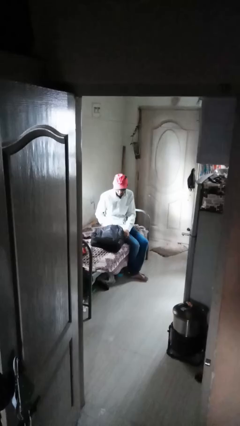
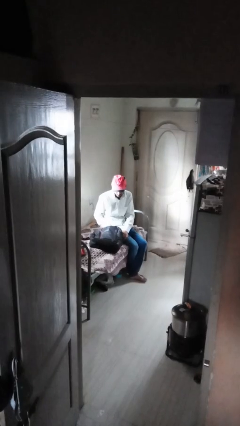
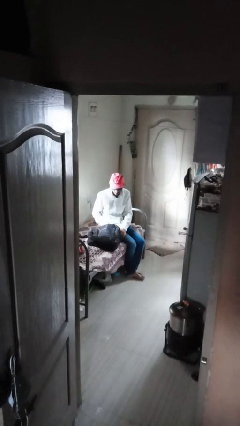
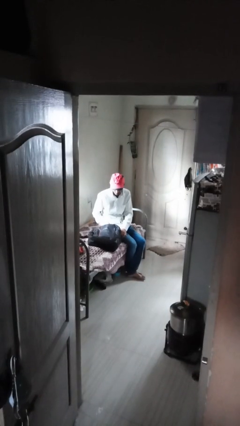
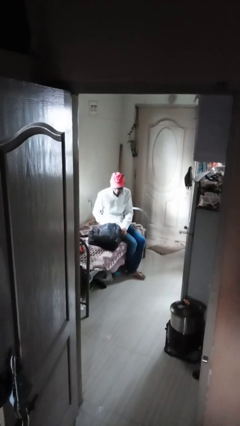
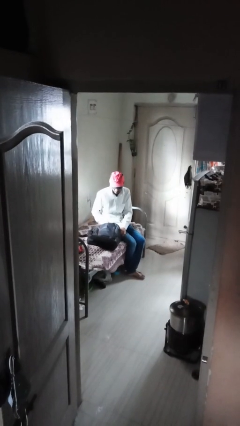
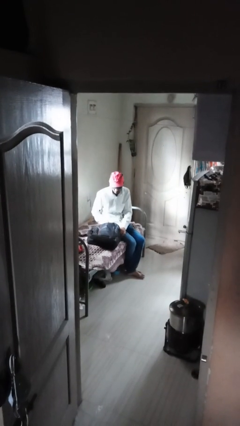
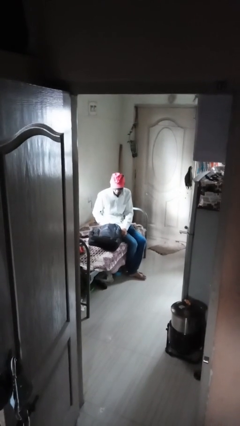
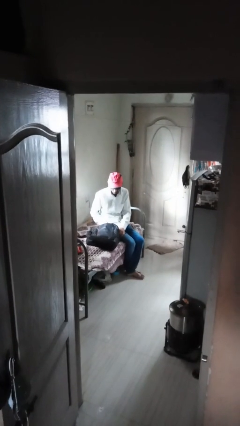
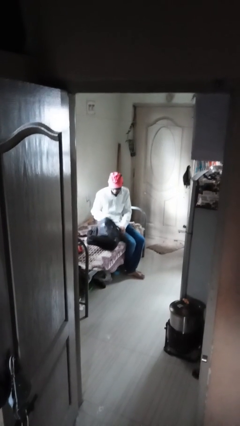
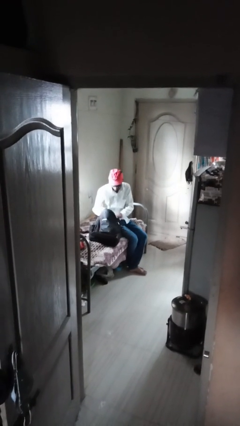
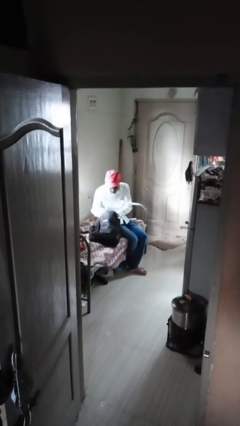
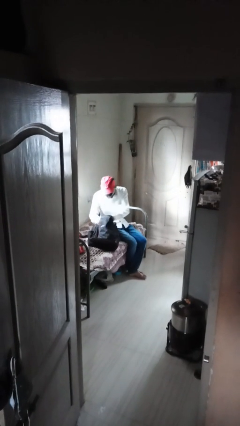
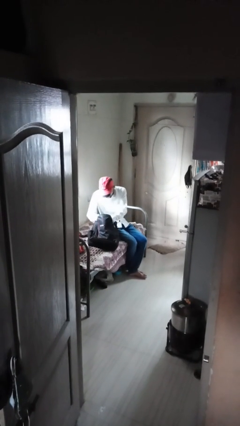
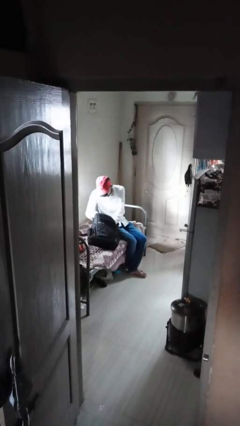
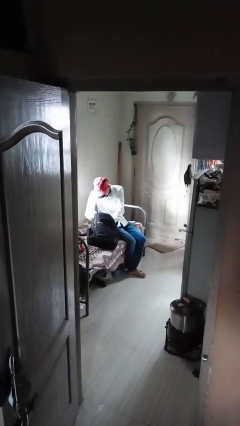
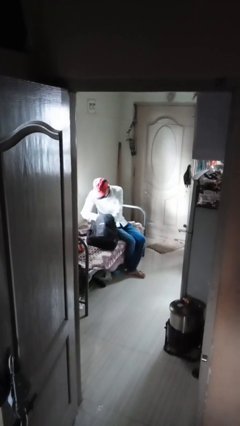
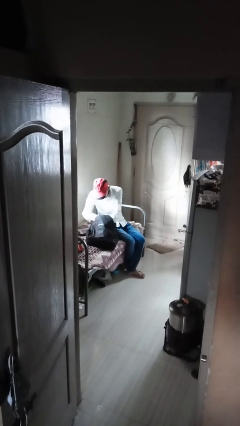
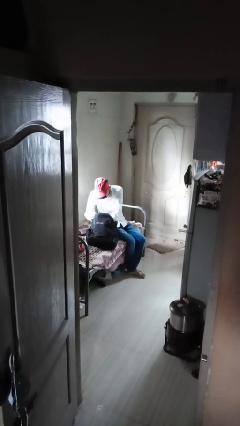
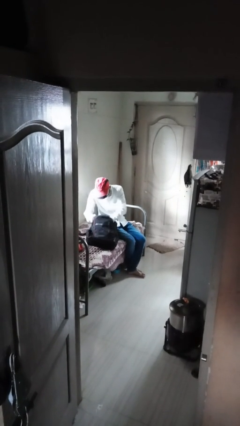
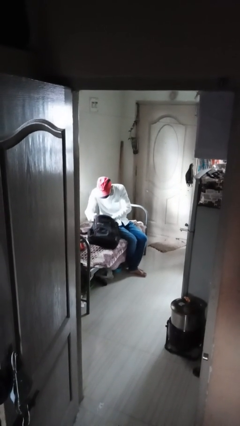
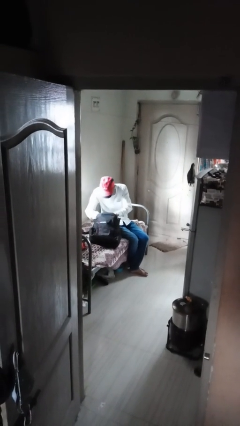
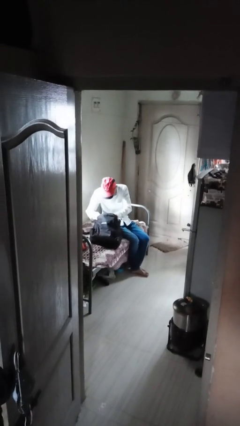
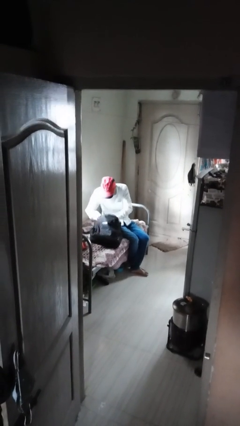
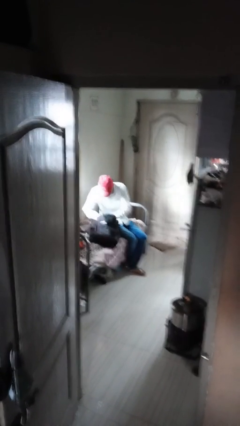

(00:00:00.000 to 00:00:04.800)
person searches in backpack

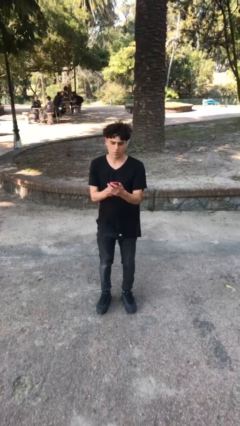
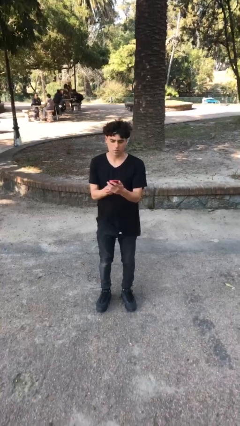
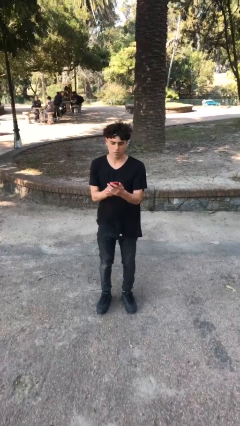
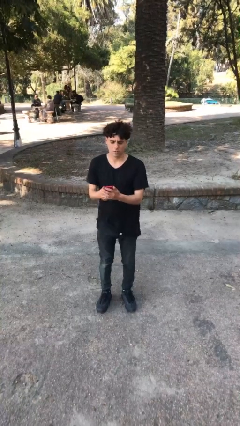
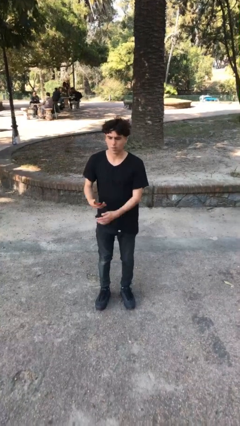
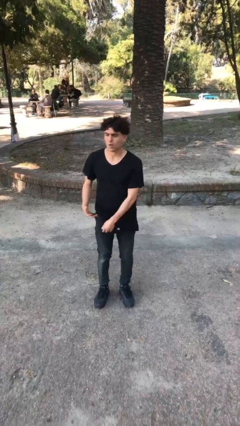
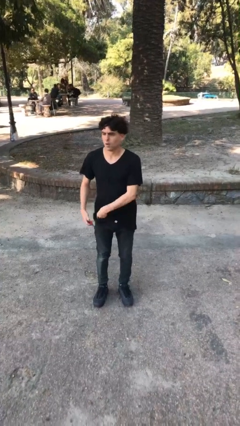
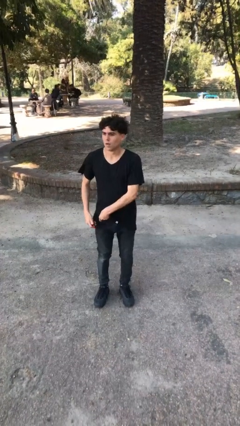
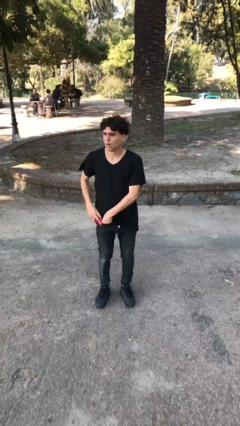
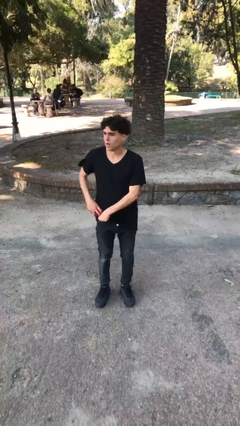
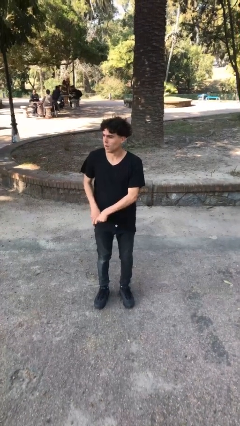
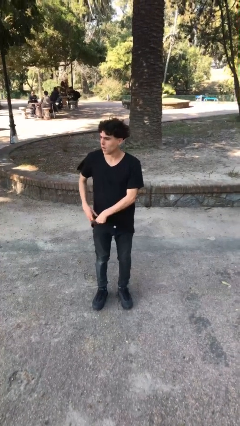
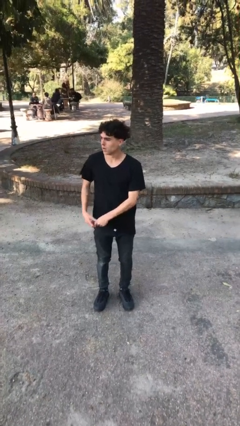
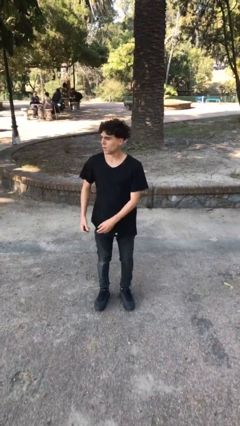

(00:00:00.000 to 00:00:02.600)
person puts phone into pocket

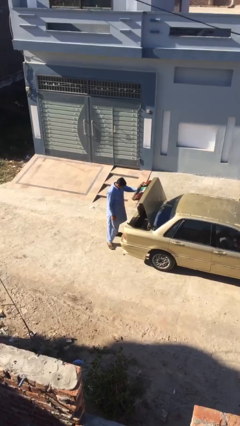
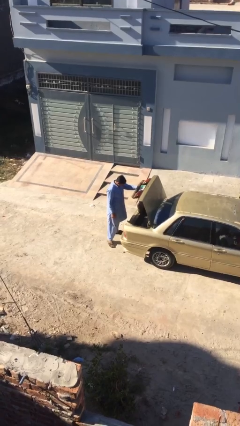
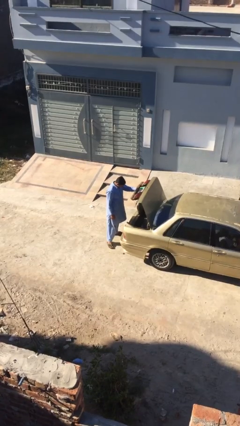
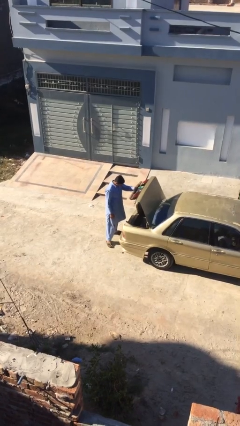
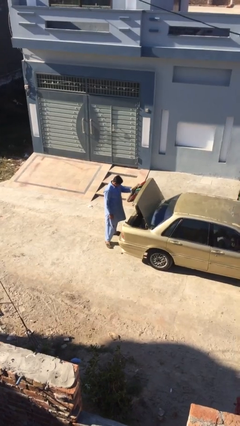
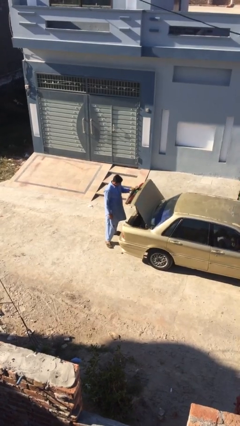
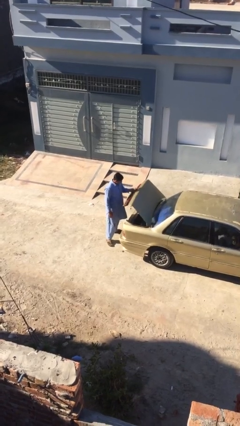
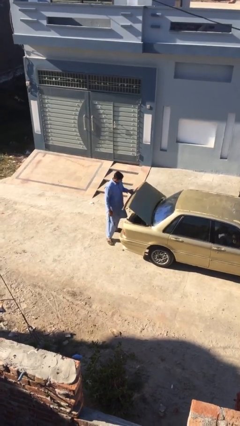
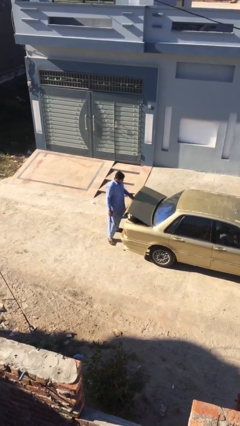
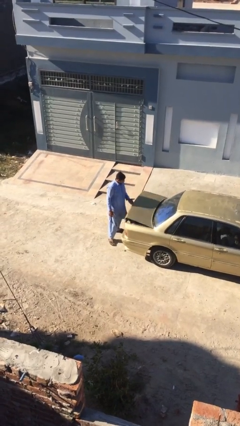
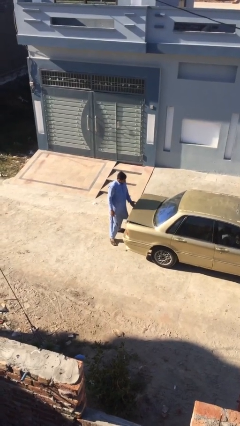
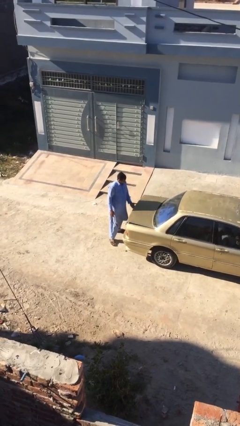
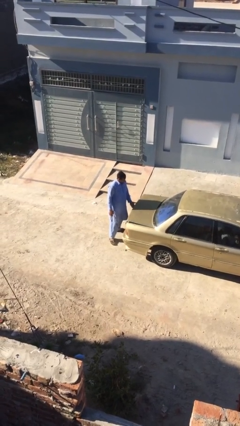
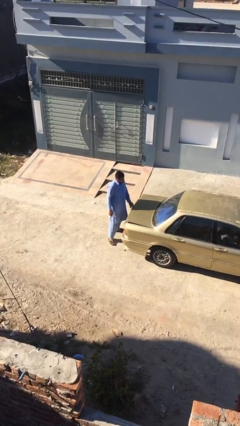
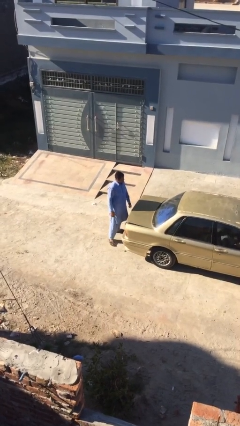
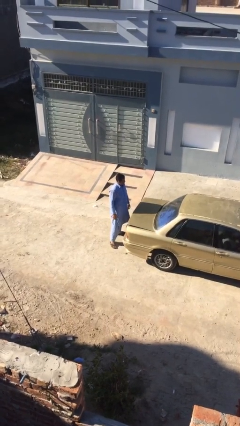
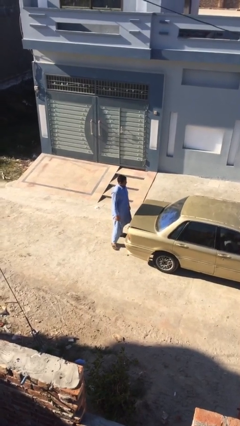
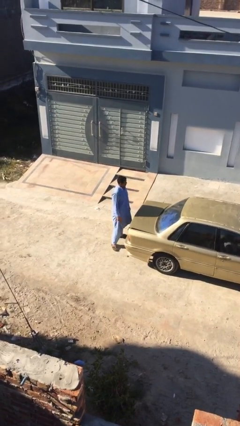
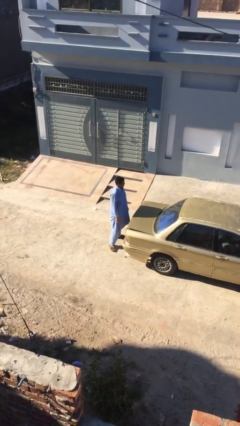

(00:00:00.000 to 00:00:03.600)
person closes car trunk

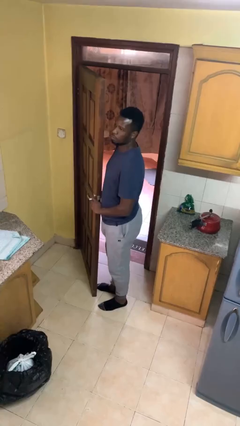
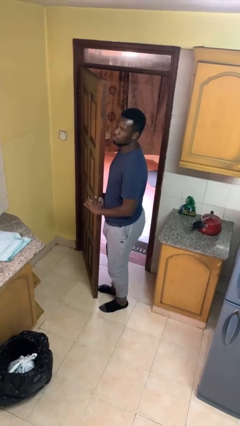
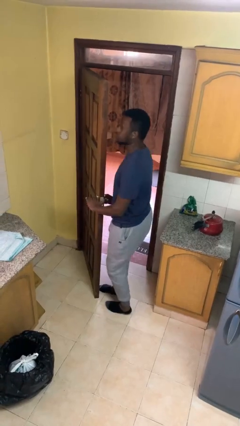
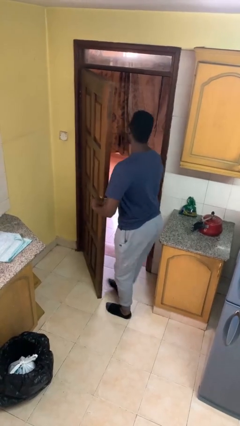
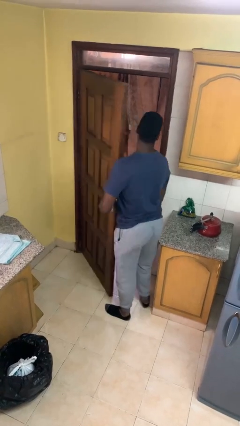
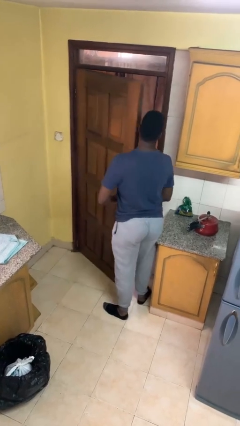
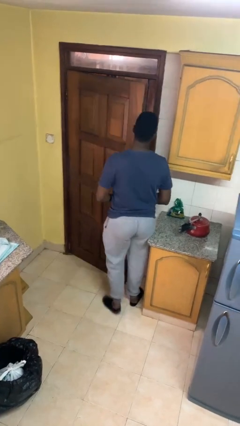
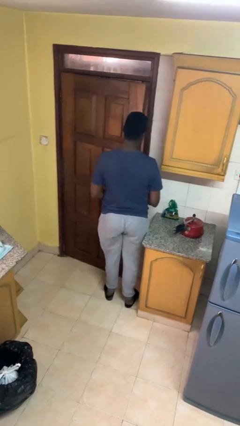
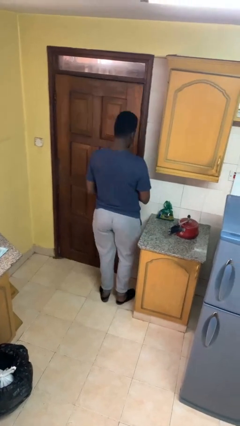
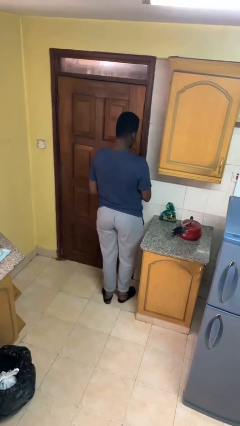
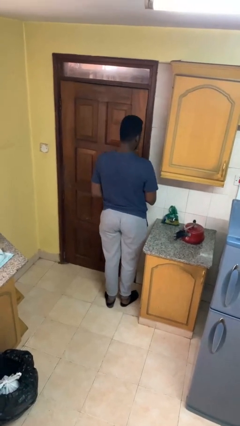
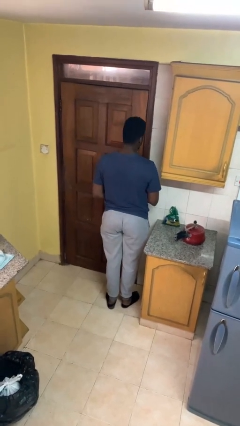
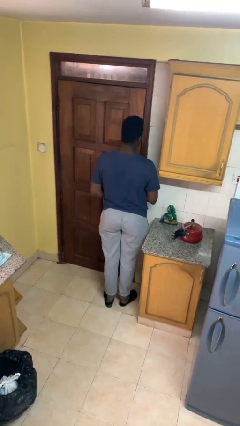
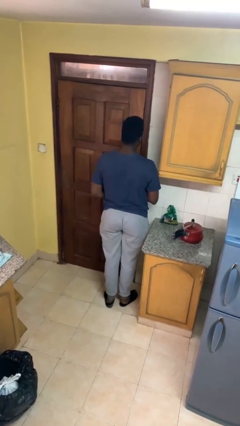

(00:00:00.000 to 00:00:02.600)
person closes facility door

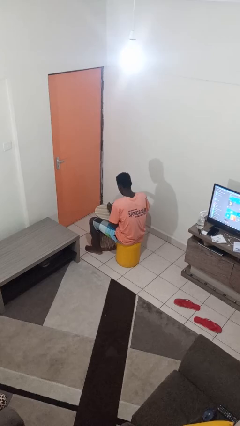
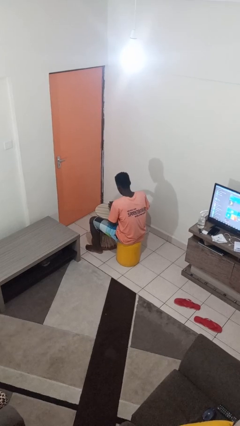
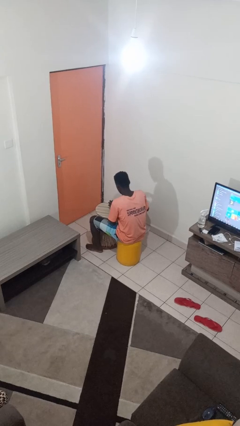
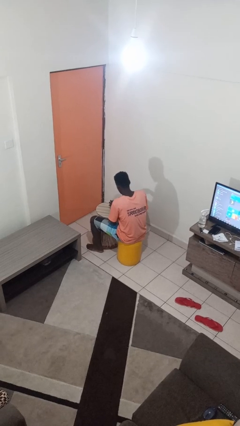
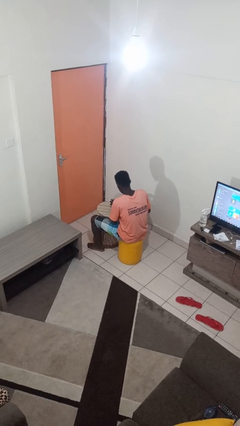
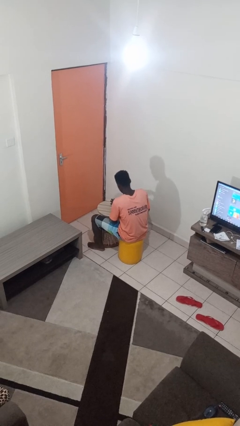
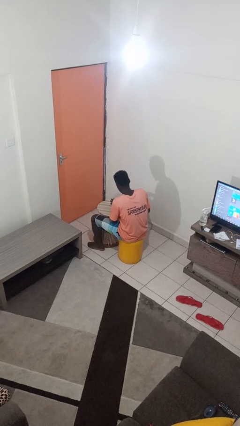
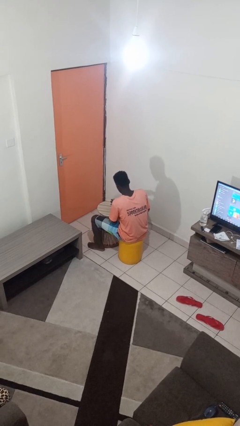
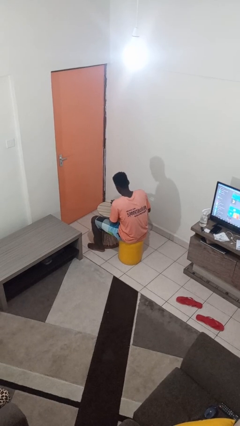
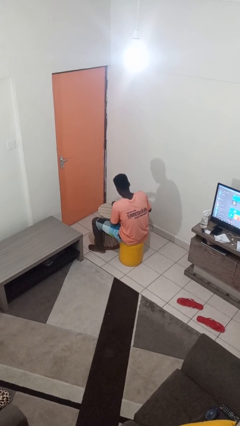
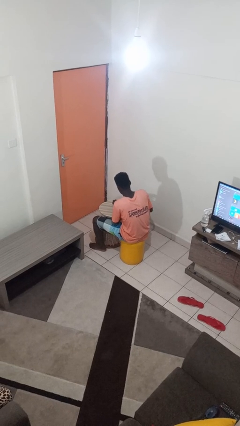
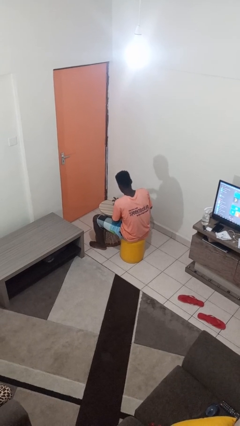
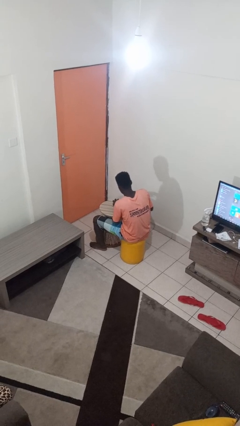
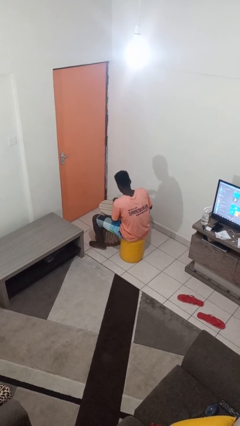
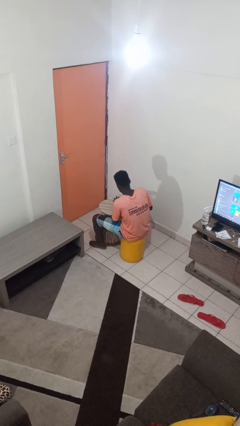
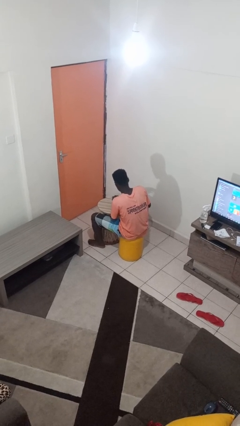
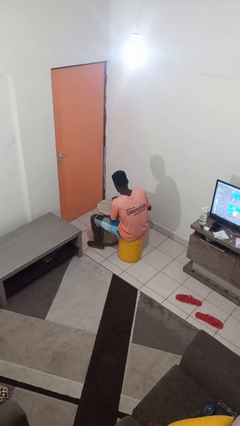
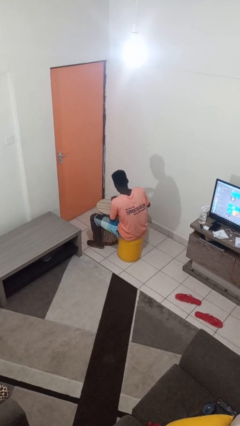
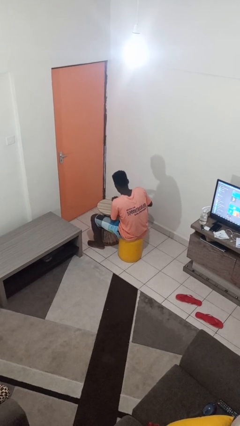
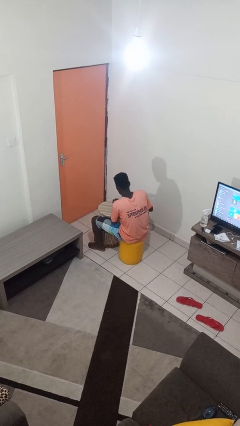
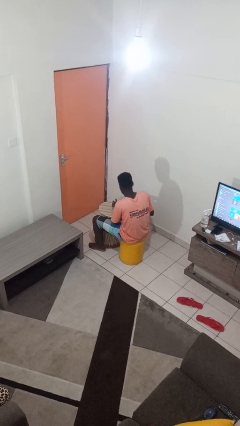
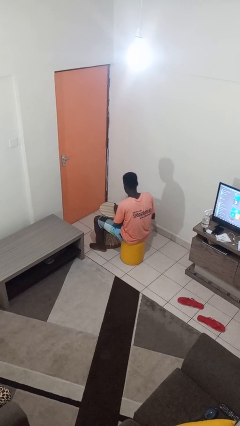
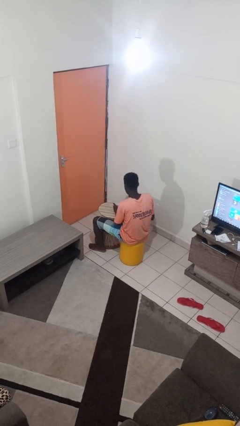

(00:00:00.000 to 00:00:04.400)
person opens can with can opener
